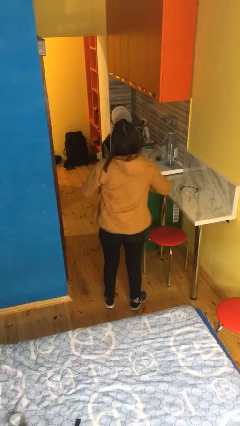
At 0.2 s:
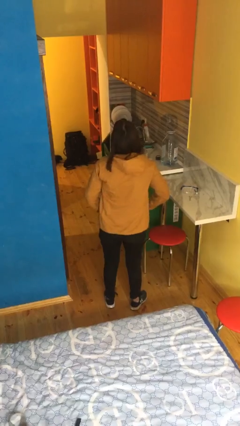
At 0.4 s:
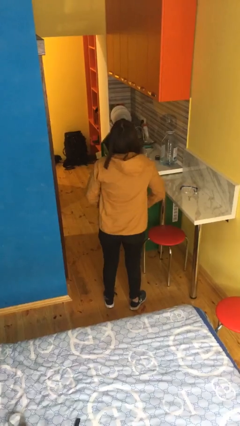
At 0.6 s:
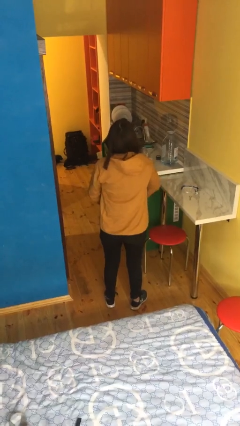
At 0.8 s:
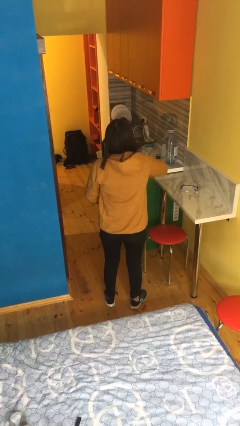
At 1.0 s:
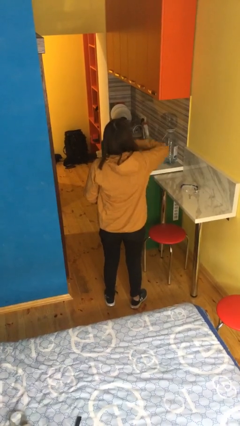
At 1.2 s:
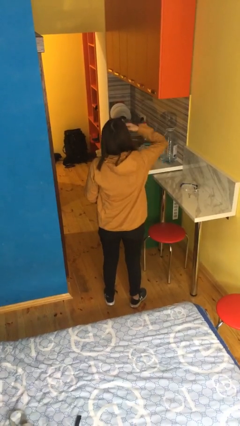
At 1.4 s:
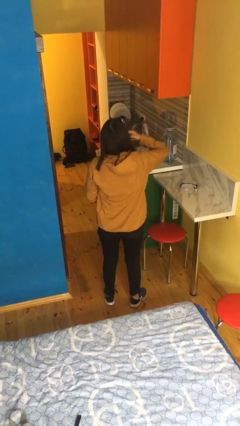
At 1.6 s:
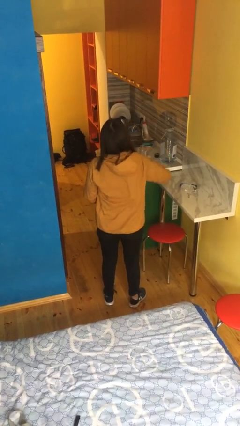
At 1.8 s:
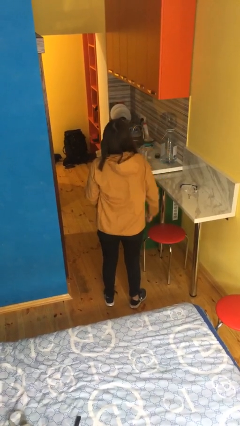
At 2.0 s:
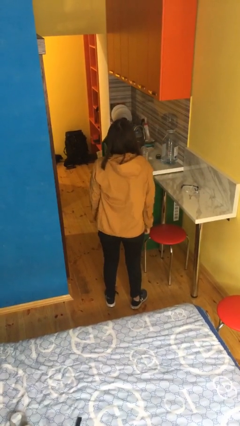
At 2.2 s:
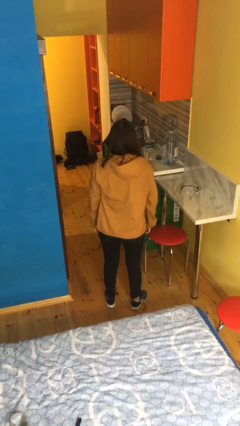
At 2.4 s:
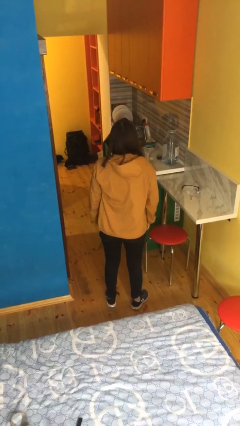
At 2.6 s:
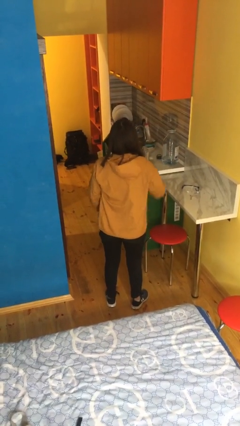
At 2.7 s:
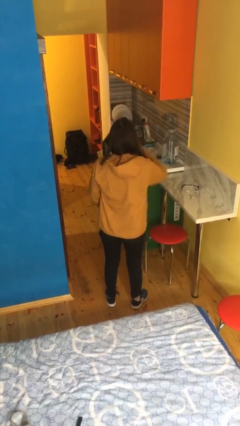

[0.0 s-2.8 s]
person zips up jacket

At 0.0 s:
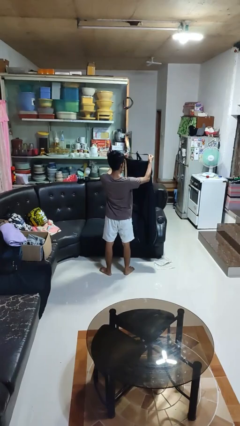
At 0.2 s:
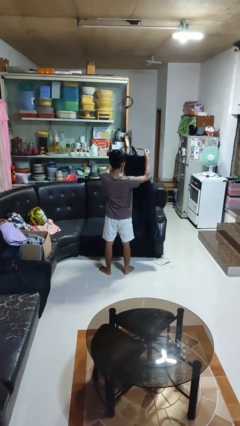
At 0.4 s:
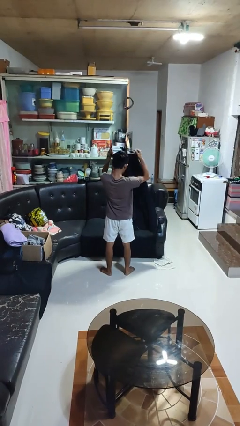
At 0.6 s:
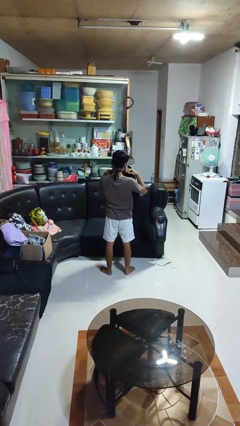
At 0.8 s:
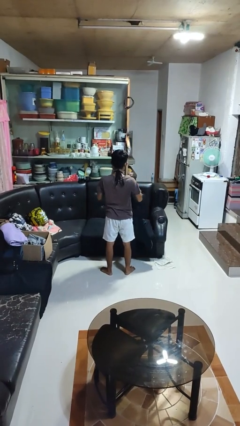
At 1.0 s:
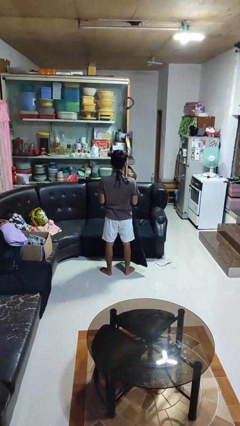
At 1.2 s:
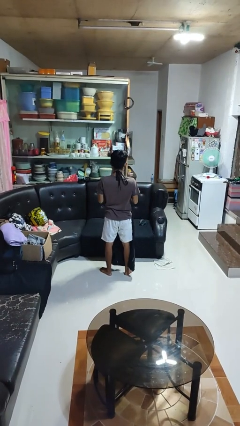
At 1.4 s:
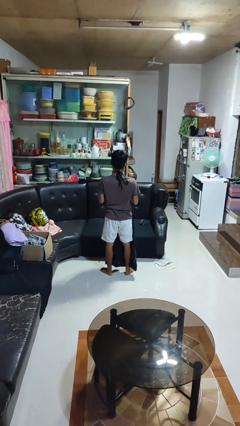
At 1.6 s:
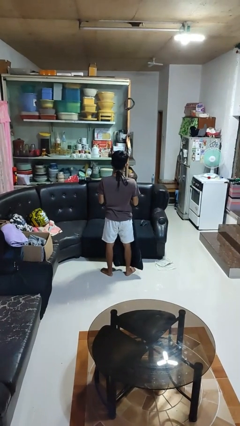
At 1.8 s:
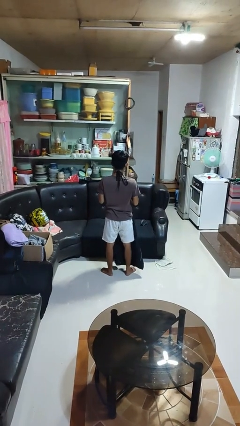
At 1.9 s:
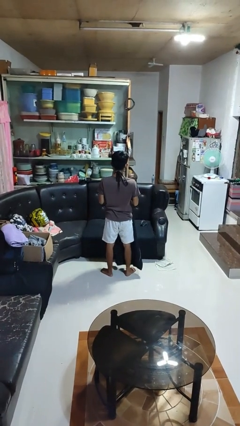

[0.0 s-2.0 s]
person puts on apron

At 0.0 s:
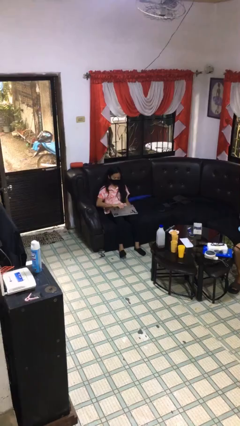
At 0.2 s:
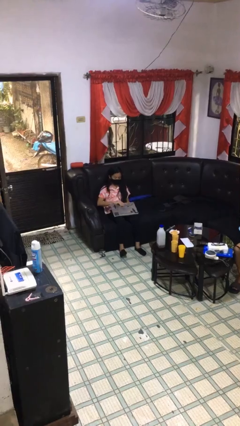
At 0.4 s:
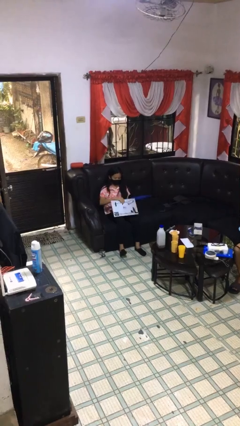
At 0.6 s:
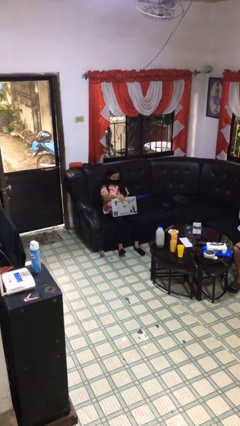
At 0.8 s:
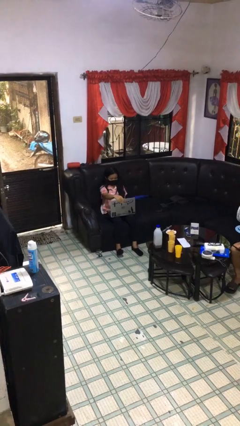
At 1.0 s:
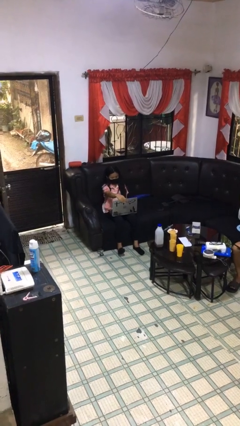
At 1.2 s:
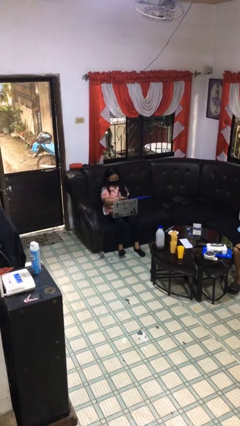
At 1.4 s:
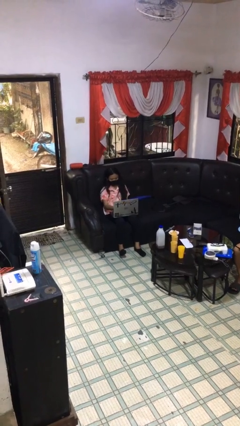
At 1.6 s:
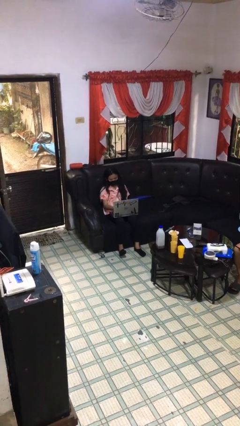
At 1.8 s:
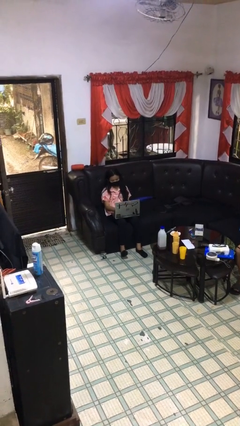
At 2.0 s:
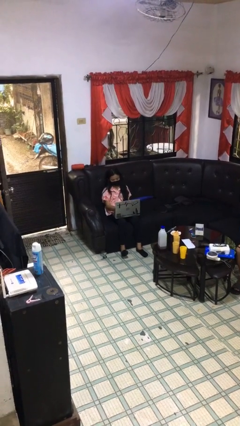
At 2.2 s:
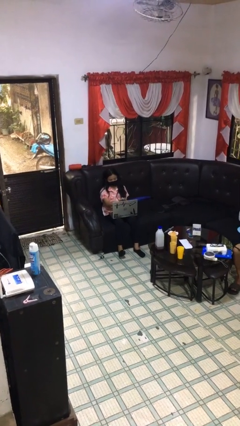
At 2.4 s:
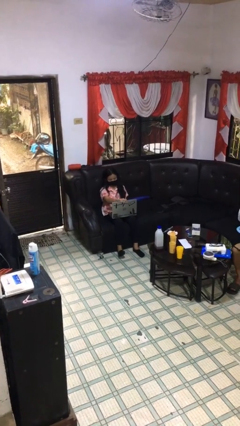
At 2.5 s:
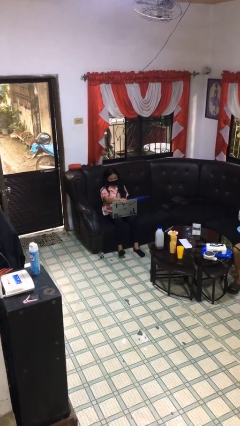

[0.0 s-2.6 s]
person interacts with laptop

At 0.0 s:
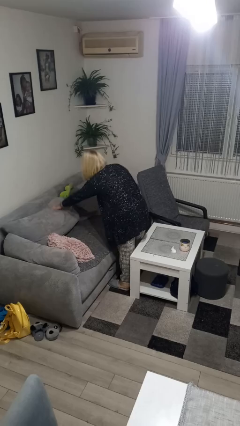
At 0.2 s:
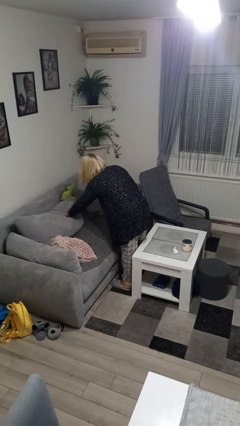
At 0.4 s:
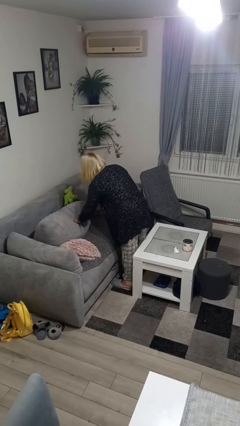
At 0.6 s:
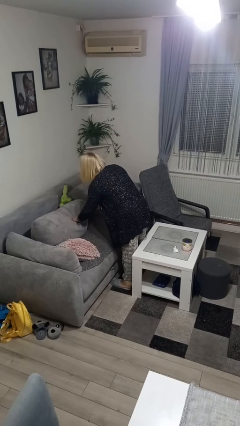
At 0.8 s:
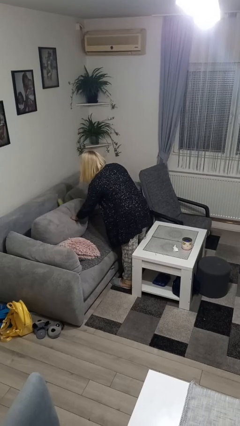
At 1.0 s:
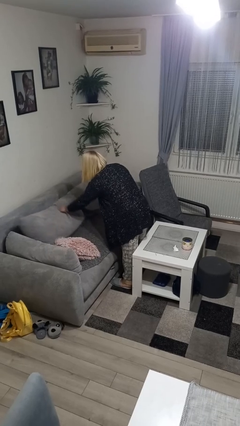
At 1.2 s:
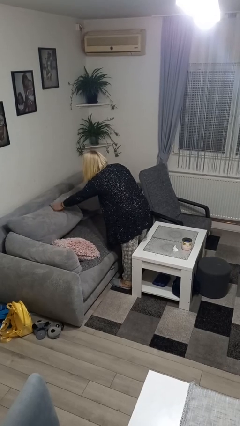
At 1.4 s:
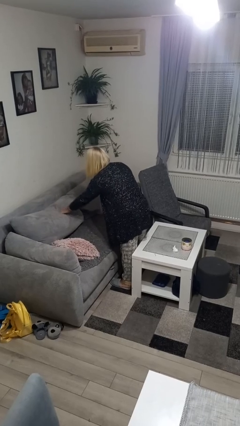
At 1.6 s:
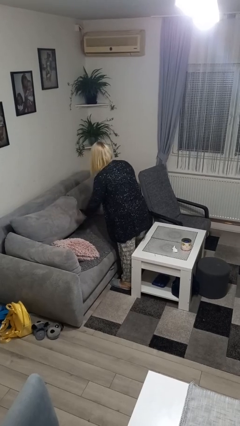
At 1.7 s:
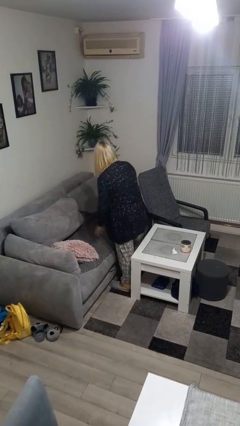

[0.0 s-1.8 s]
person searches in couch

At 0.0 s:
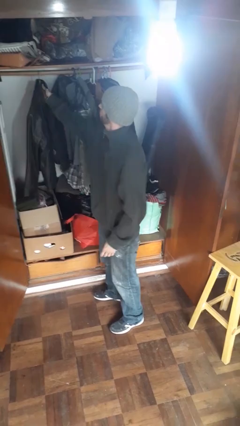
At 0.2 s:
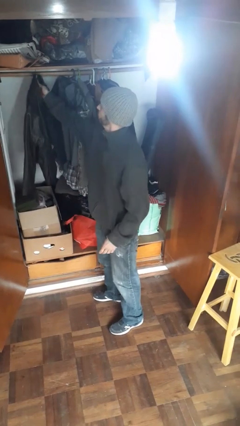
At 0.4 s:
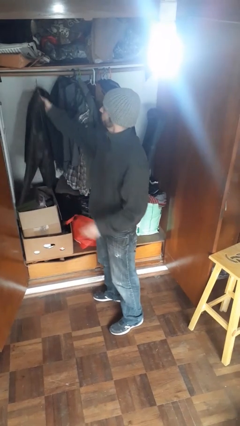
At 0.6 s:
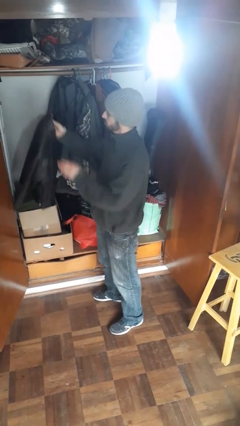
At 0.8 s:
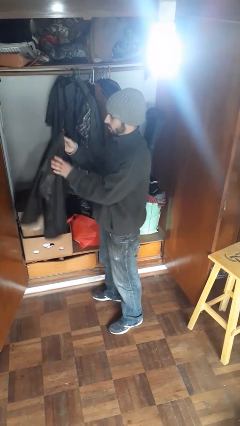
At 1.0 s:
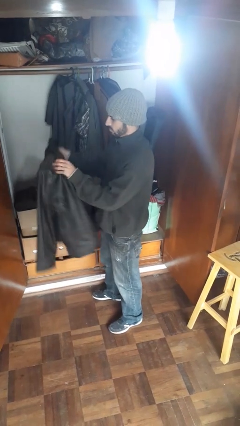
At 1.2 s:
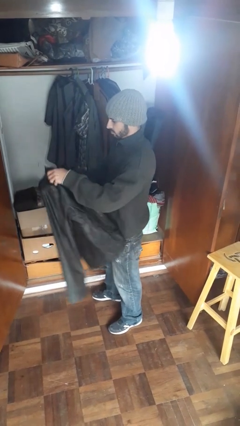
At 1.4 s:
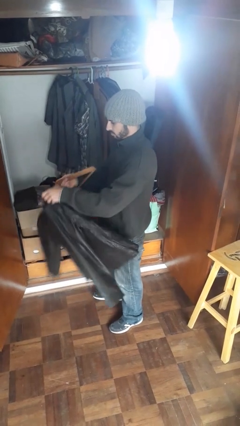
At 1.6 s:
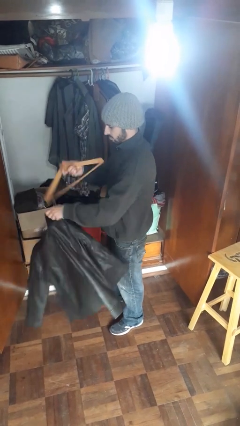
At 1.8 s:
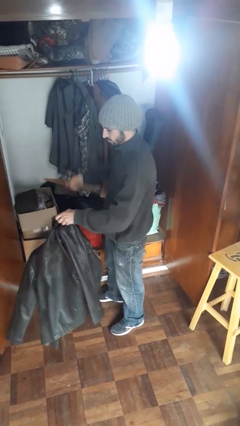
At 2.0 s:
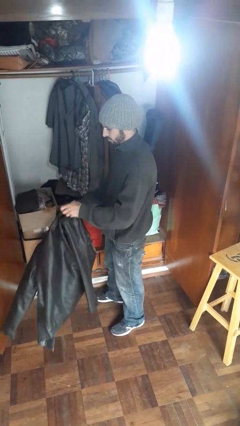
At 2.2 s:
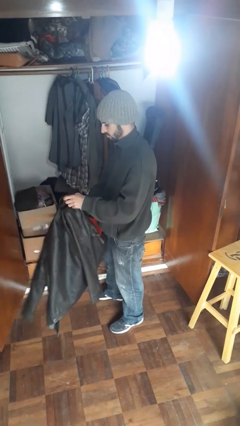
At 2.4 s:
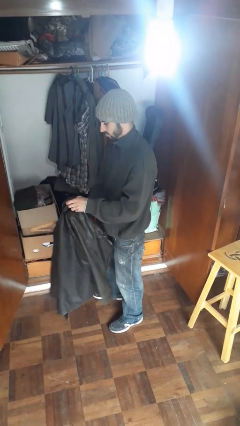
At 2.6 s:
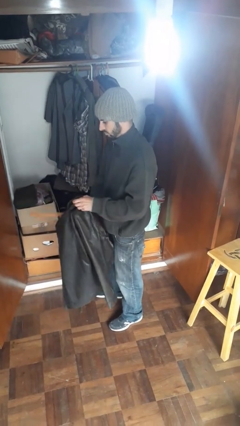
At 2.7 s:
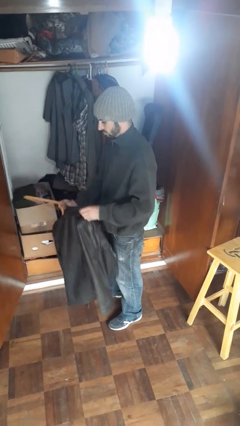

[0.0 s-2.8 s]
person takes clothes from closet

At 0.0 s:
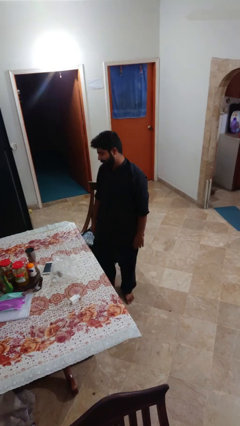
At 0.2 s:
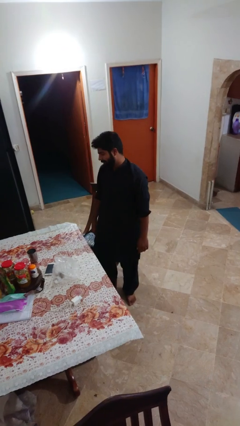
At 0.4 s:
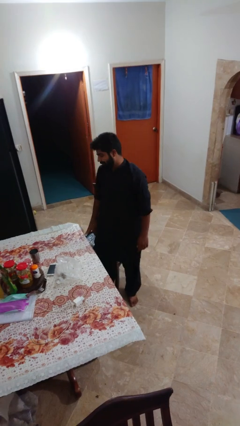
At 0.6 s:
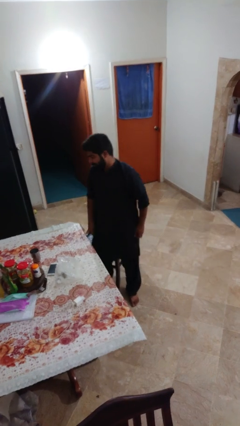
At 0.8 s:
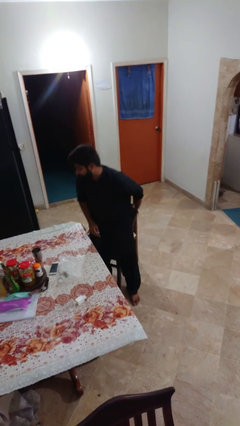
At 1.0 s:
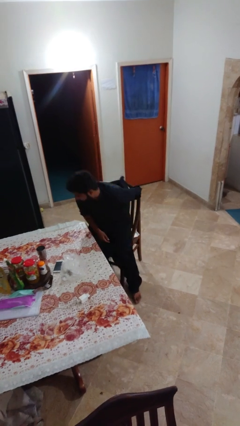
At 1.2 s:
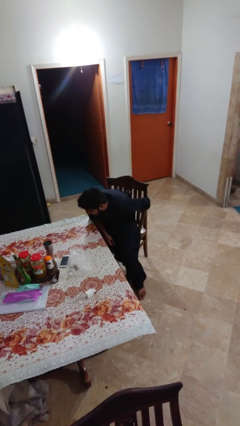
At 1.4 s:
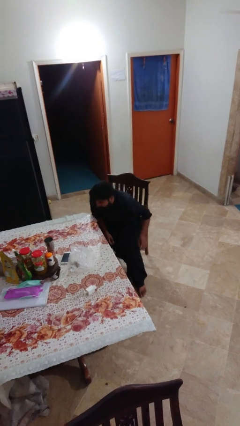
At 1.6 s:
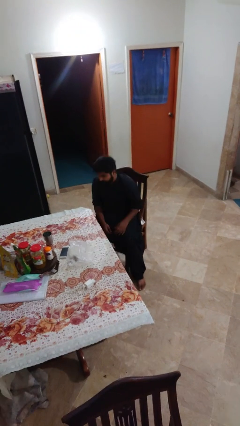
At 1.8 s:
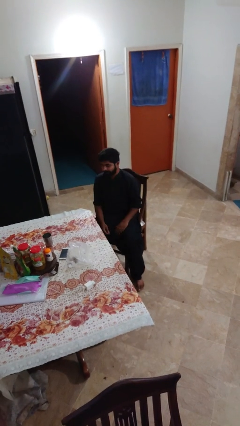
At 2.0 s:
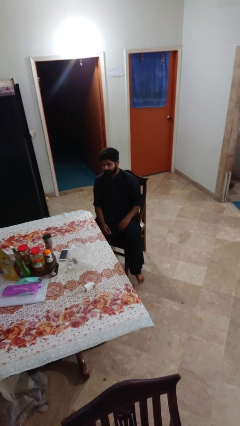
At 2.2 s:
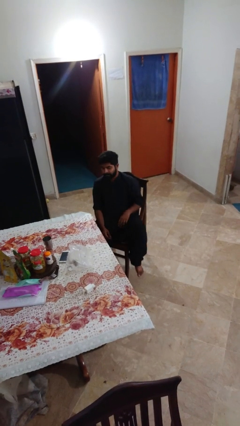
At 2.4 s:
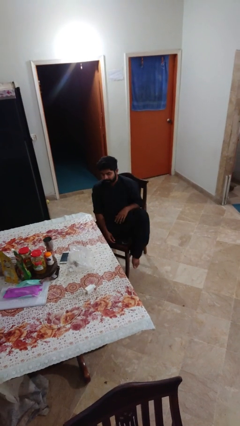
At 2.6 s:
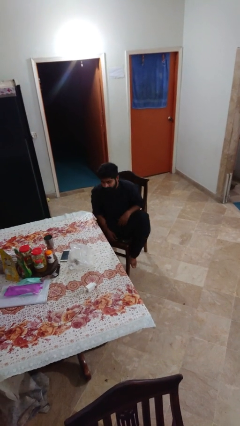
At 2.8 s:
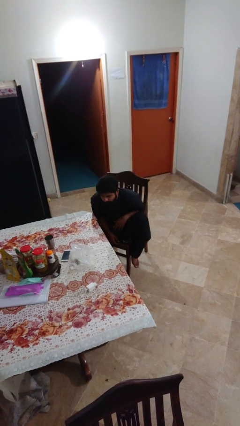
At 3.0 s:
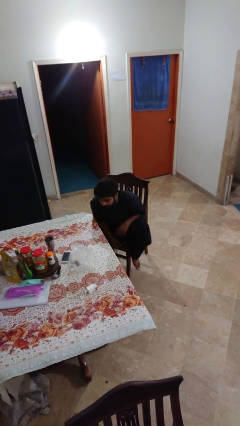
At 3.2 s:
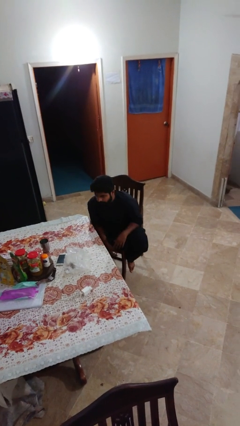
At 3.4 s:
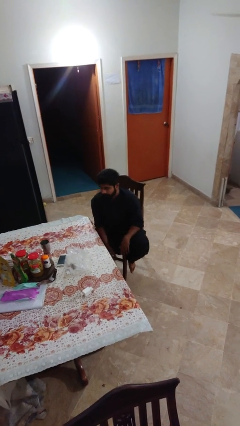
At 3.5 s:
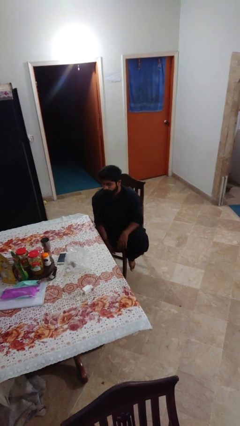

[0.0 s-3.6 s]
person sits down

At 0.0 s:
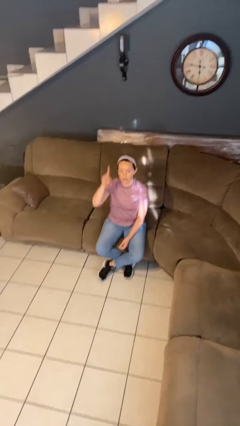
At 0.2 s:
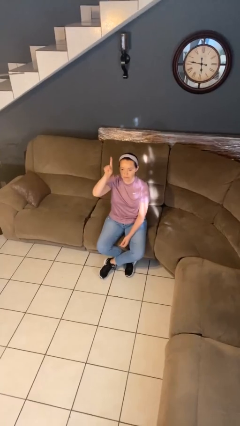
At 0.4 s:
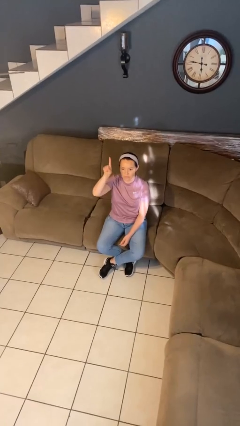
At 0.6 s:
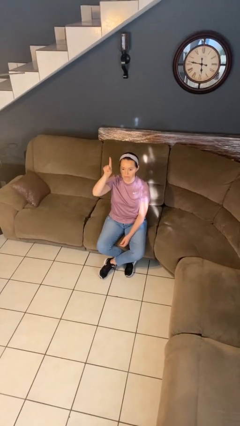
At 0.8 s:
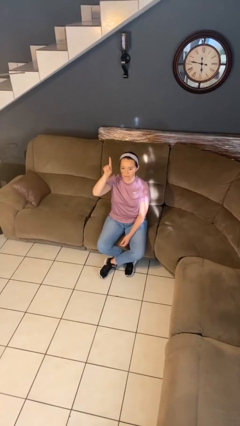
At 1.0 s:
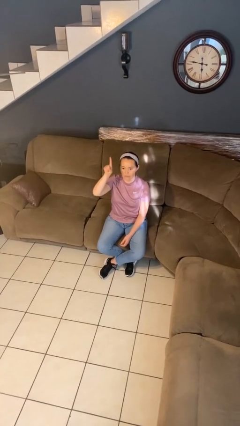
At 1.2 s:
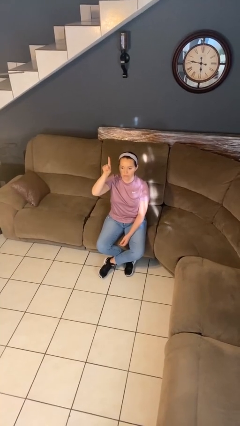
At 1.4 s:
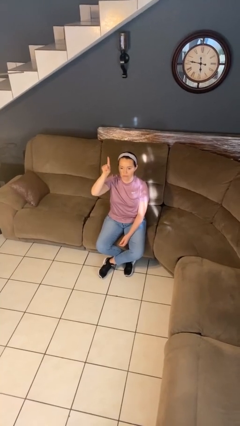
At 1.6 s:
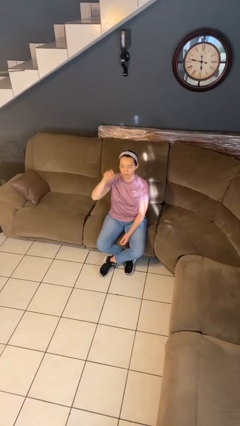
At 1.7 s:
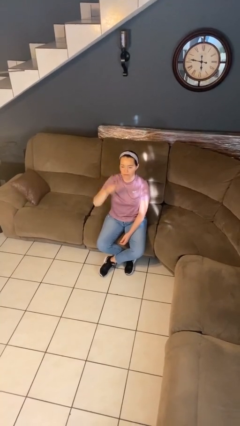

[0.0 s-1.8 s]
person gestures number one
